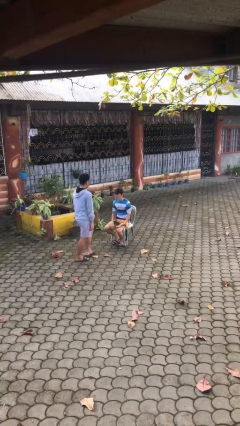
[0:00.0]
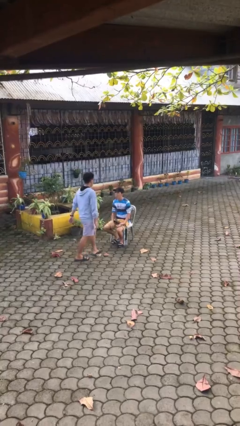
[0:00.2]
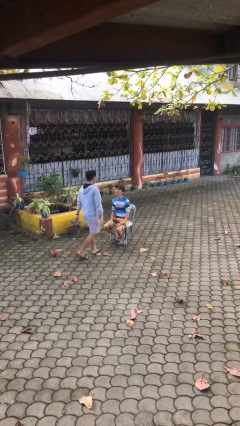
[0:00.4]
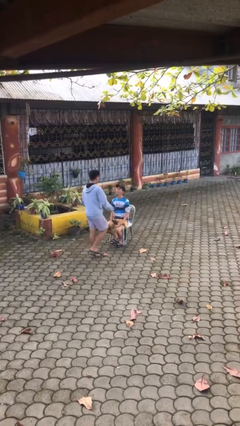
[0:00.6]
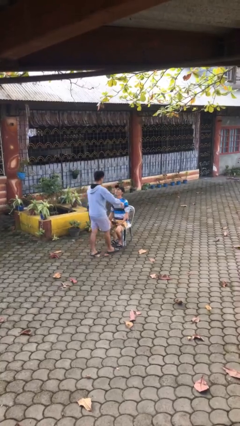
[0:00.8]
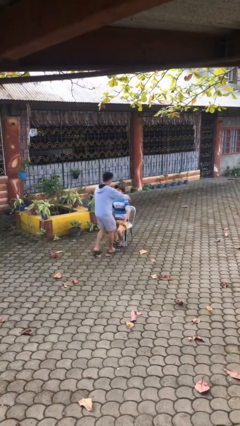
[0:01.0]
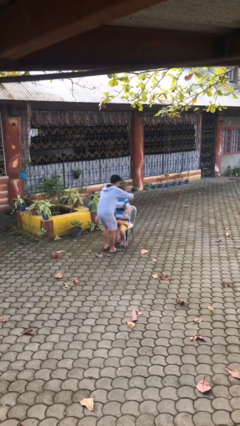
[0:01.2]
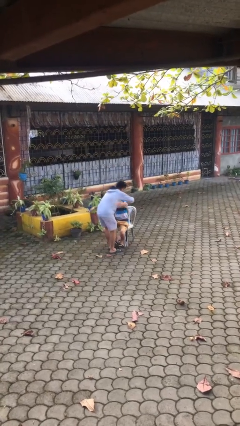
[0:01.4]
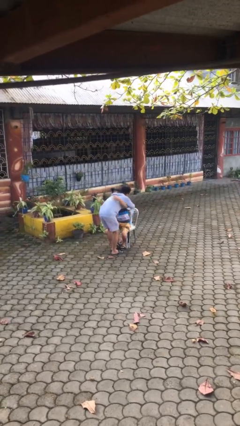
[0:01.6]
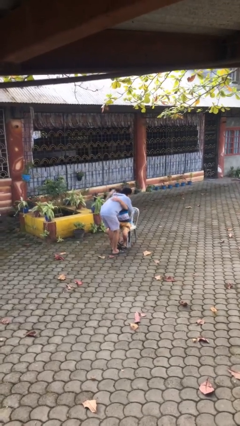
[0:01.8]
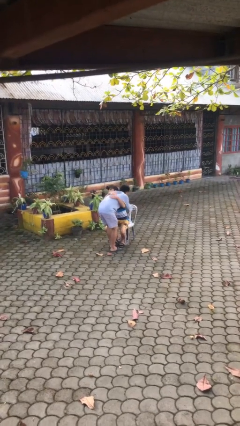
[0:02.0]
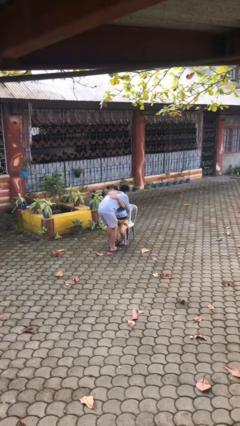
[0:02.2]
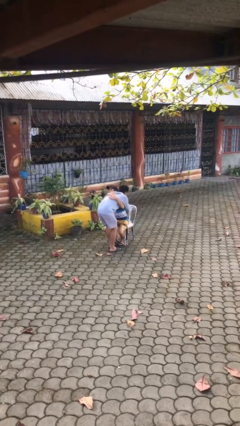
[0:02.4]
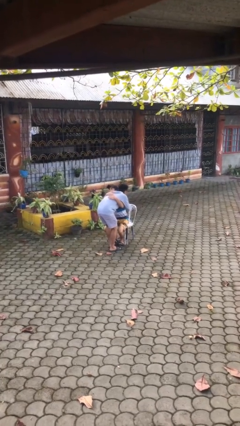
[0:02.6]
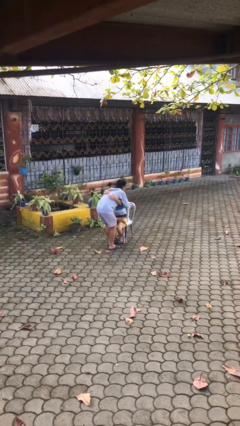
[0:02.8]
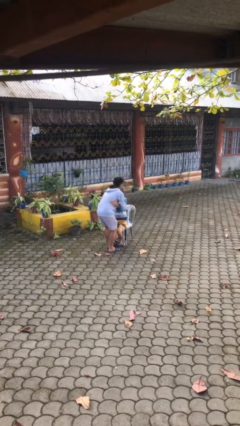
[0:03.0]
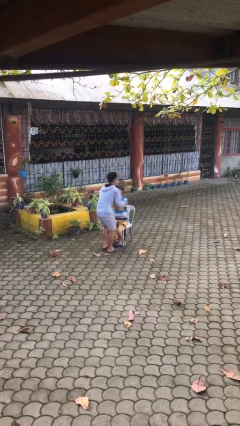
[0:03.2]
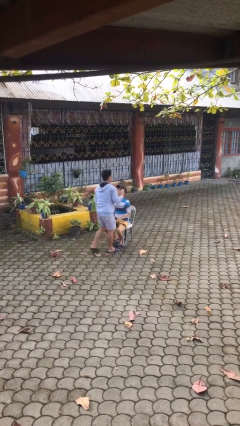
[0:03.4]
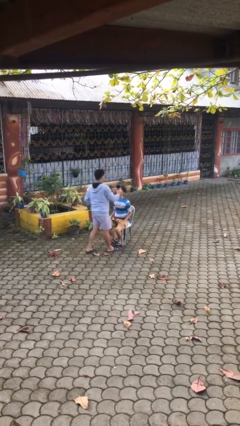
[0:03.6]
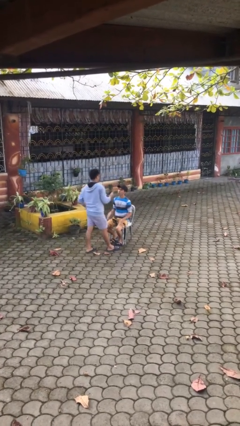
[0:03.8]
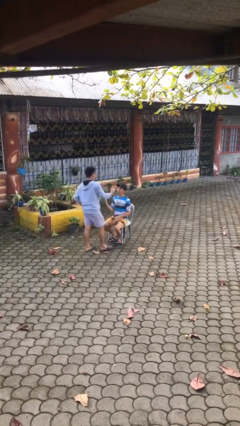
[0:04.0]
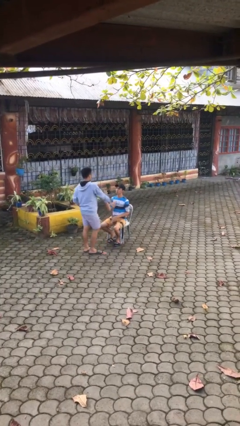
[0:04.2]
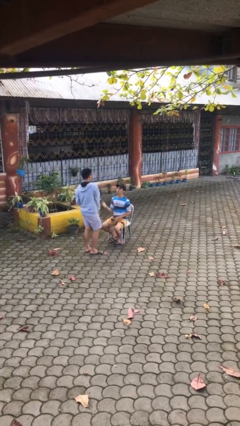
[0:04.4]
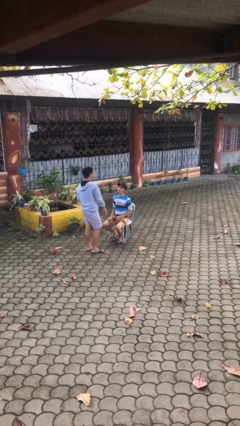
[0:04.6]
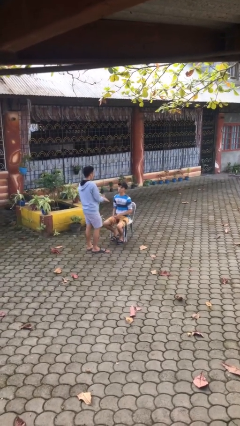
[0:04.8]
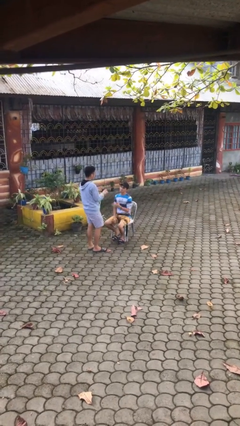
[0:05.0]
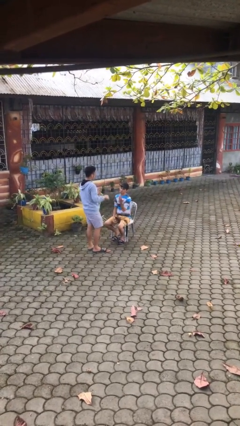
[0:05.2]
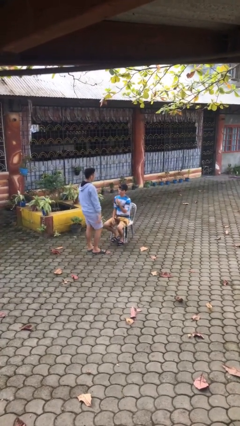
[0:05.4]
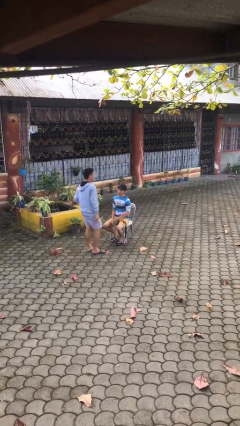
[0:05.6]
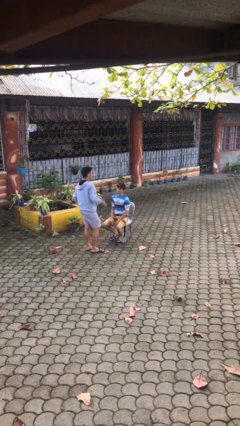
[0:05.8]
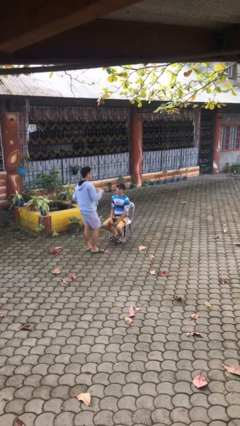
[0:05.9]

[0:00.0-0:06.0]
person embraces person

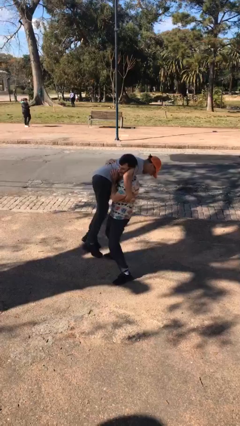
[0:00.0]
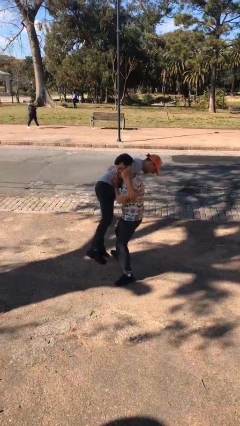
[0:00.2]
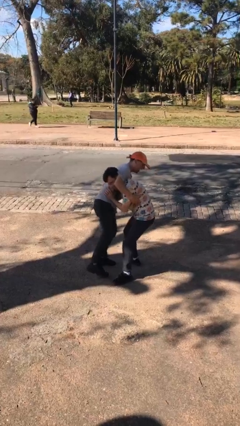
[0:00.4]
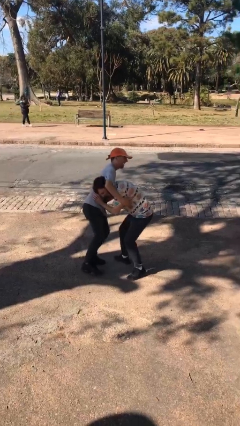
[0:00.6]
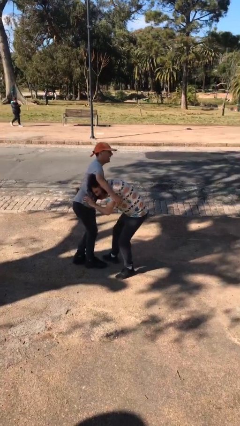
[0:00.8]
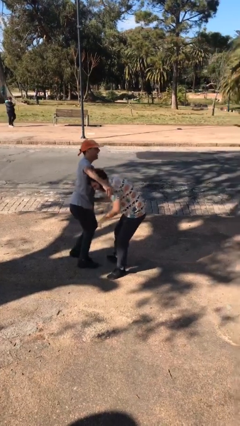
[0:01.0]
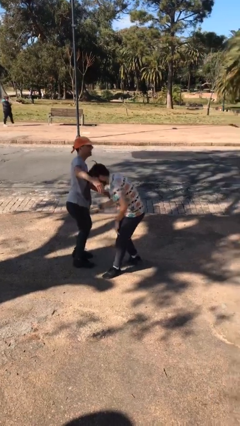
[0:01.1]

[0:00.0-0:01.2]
person puts down person

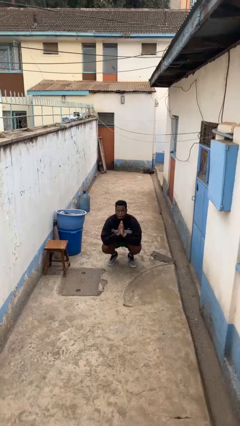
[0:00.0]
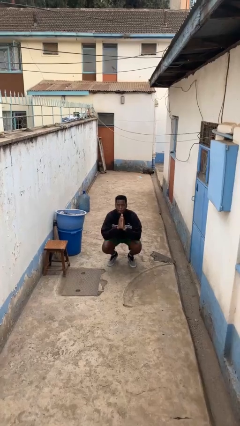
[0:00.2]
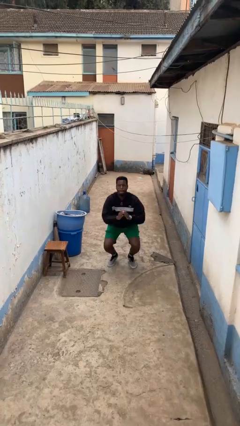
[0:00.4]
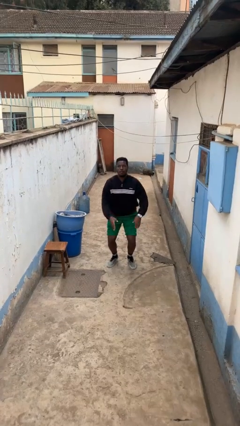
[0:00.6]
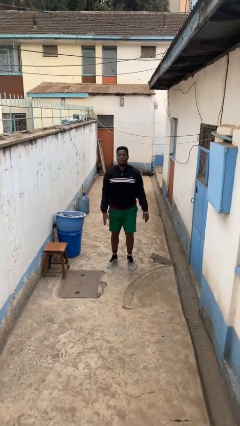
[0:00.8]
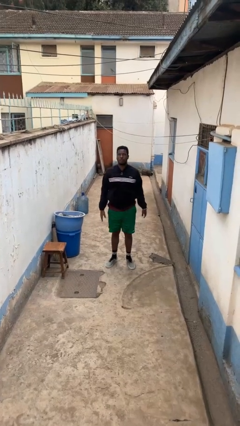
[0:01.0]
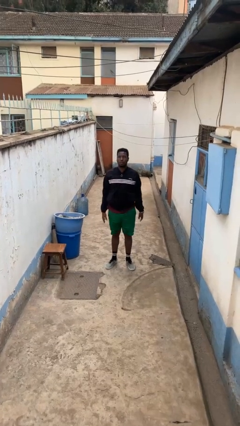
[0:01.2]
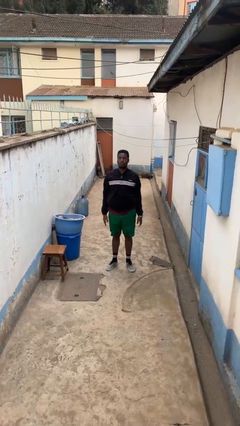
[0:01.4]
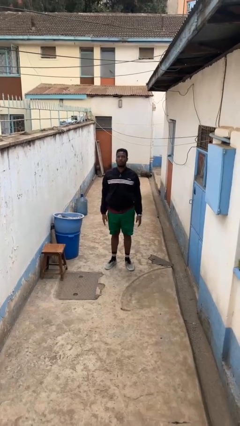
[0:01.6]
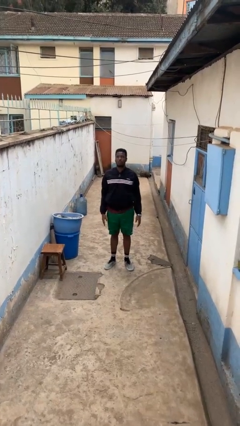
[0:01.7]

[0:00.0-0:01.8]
person stands up

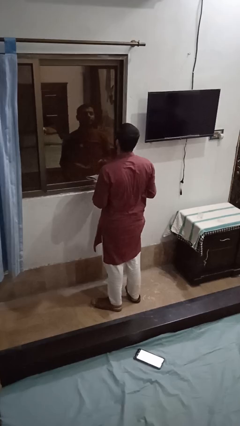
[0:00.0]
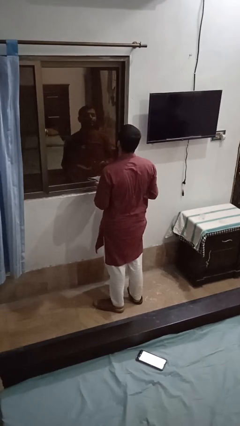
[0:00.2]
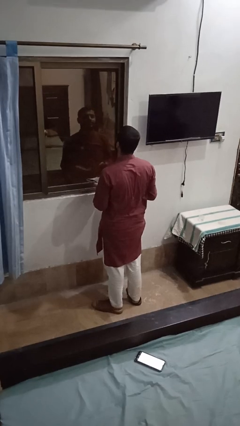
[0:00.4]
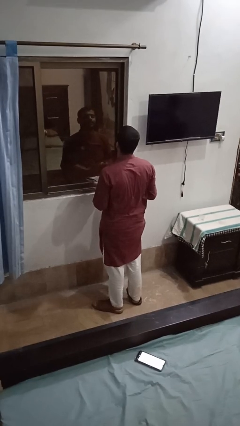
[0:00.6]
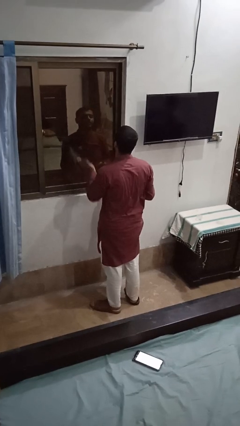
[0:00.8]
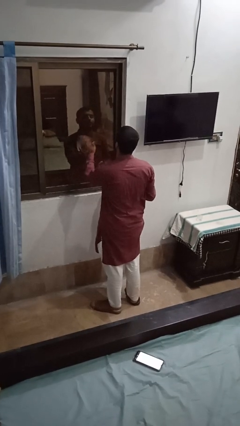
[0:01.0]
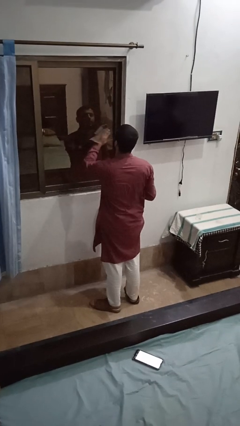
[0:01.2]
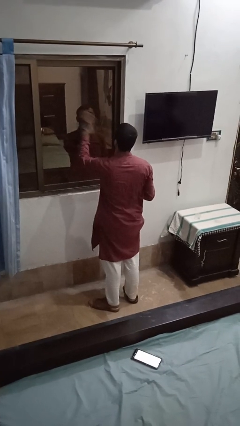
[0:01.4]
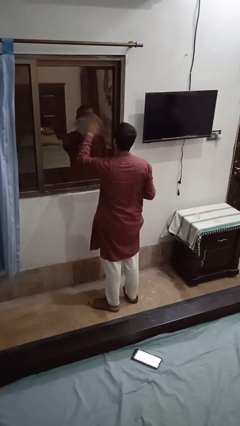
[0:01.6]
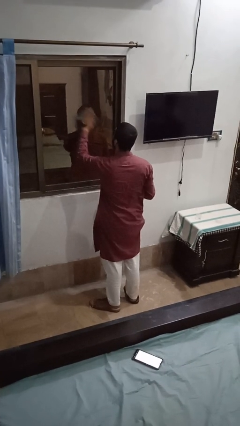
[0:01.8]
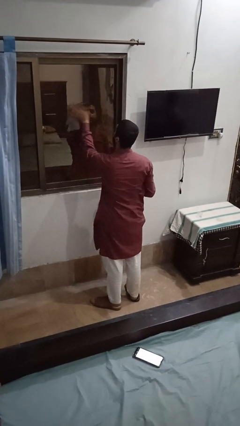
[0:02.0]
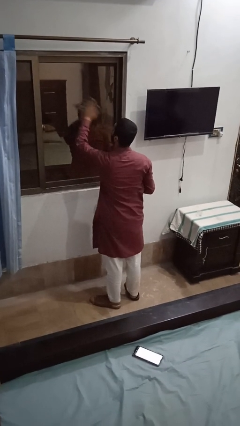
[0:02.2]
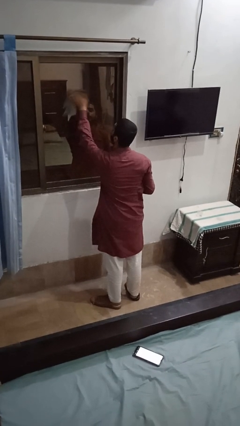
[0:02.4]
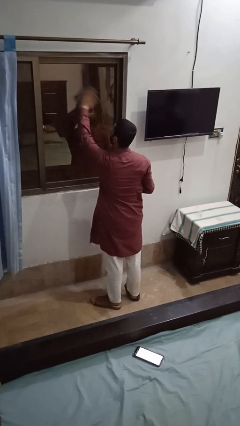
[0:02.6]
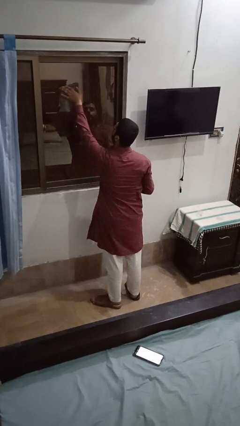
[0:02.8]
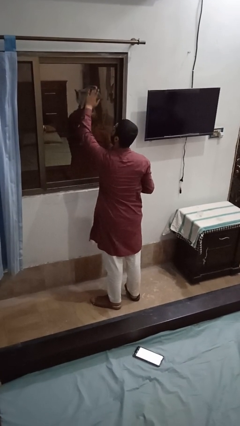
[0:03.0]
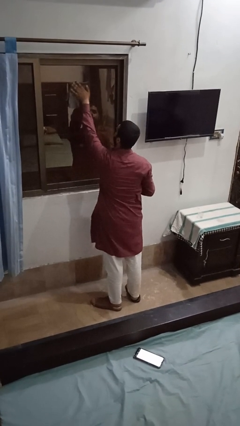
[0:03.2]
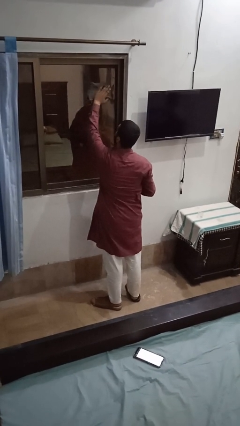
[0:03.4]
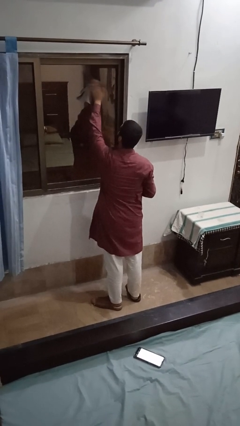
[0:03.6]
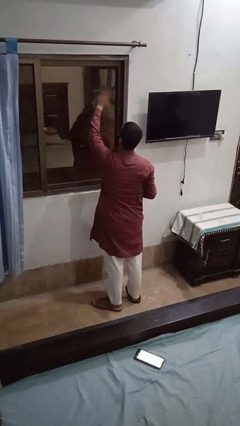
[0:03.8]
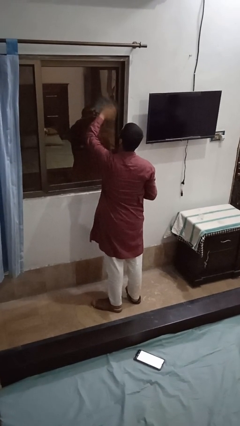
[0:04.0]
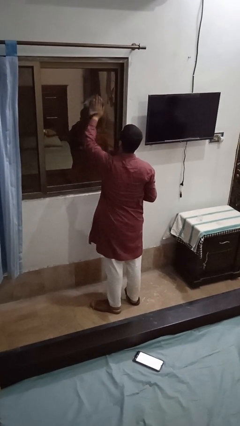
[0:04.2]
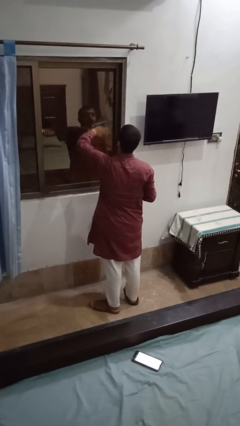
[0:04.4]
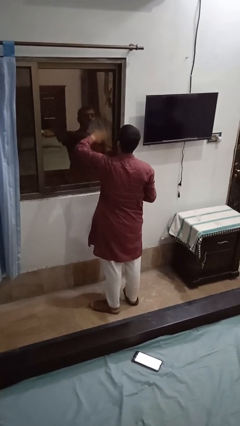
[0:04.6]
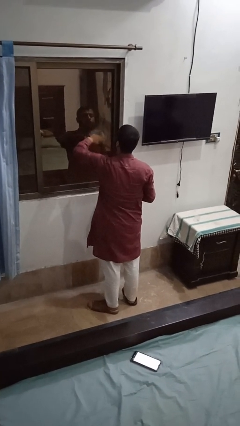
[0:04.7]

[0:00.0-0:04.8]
person washes window

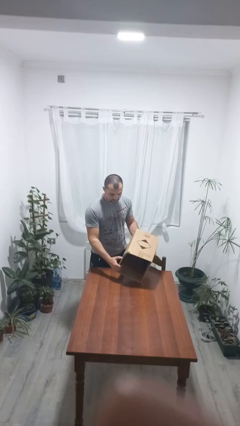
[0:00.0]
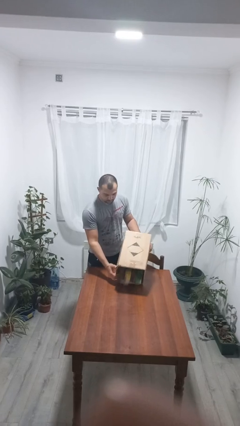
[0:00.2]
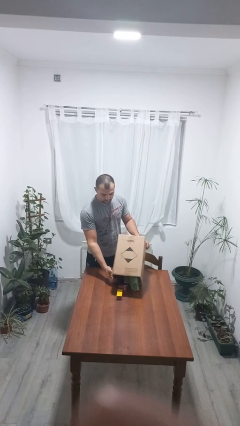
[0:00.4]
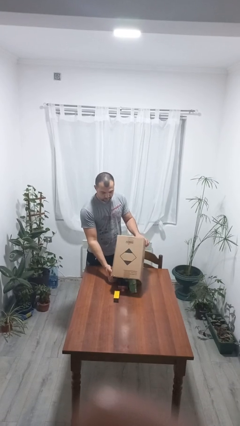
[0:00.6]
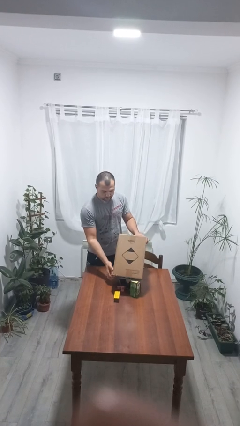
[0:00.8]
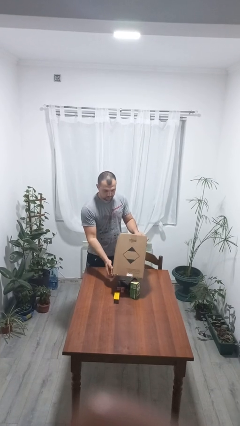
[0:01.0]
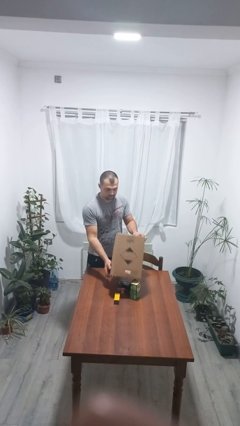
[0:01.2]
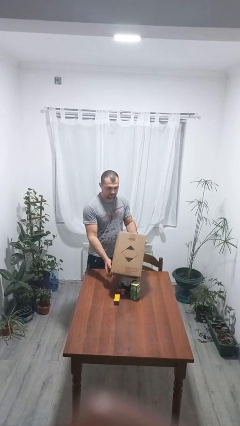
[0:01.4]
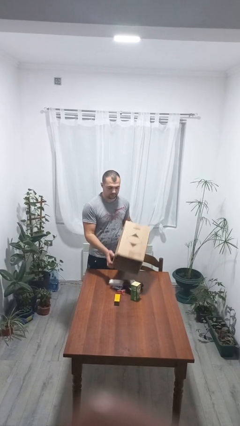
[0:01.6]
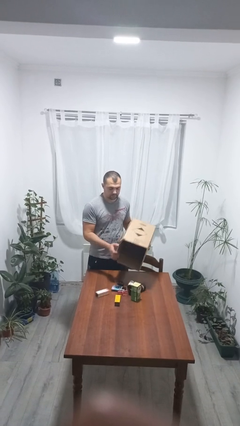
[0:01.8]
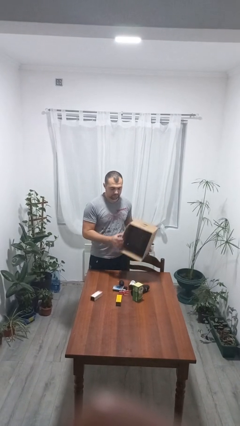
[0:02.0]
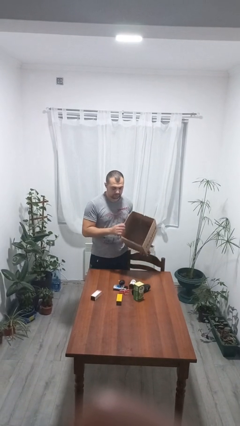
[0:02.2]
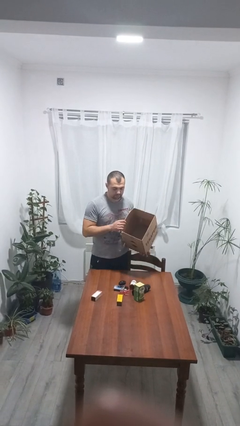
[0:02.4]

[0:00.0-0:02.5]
person unloads box onto table

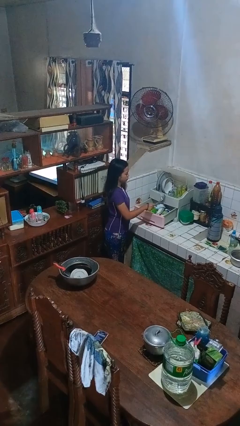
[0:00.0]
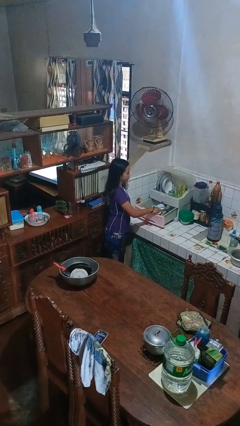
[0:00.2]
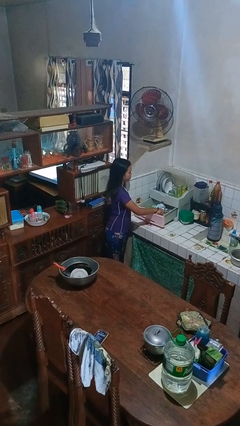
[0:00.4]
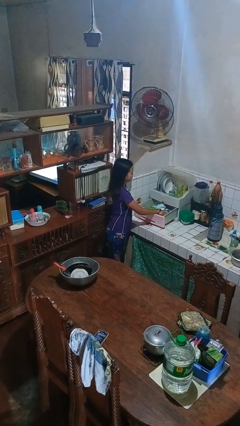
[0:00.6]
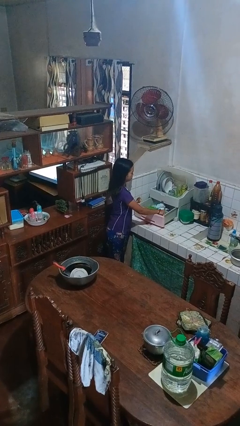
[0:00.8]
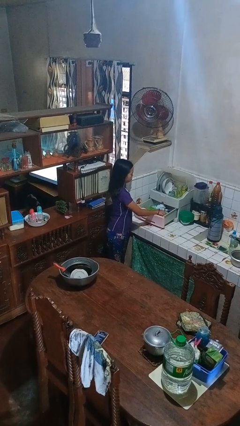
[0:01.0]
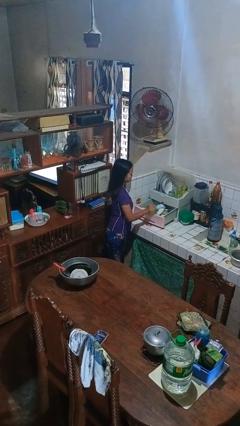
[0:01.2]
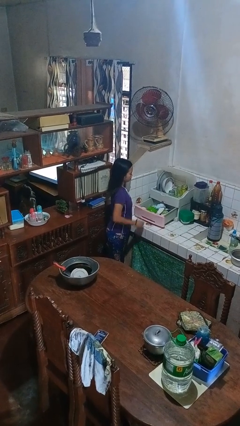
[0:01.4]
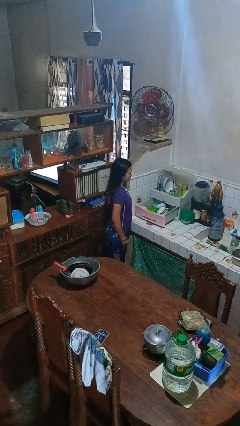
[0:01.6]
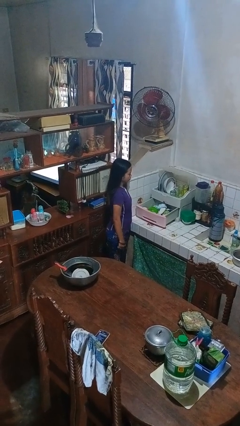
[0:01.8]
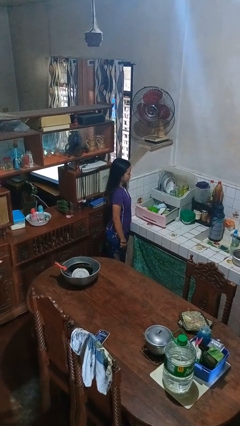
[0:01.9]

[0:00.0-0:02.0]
person puts object into kitchen drawer
